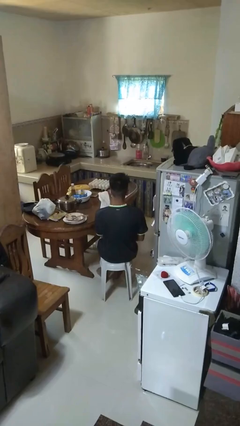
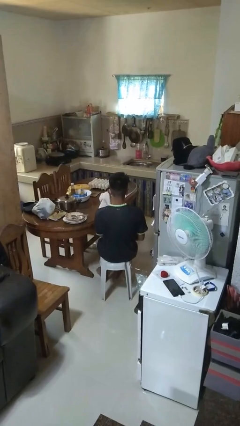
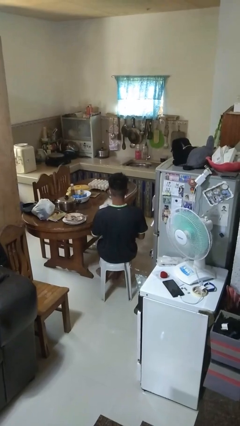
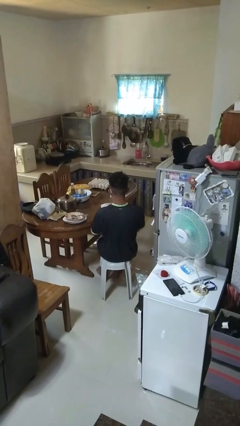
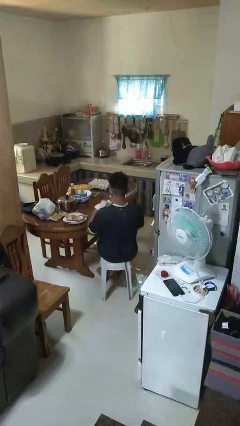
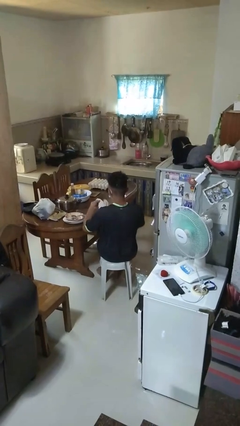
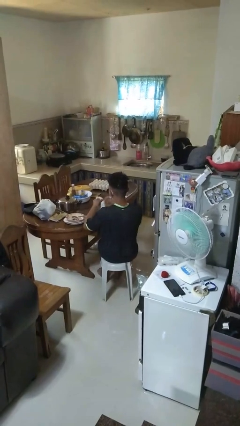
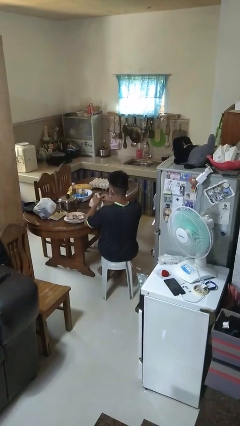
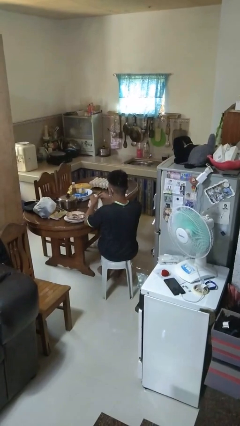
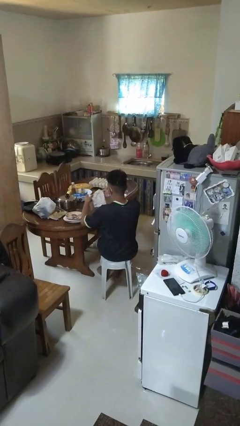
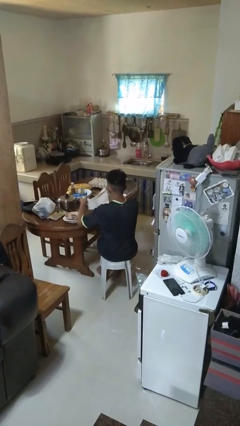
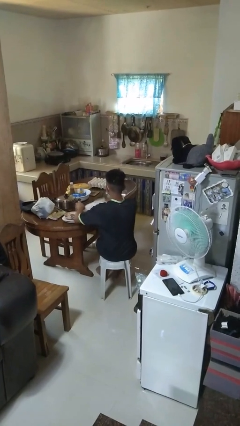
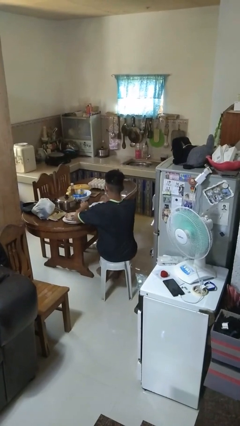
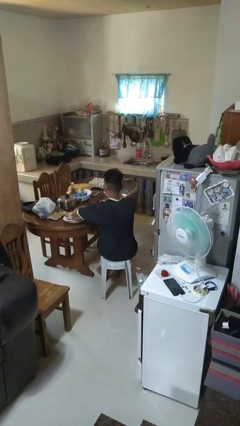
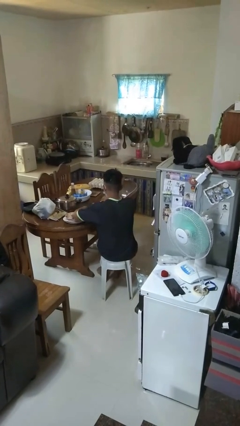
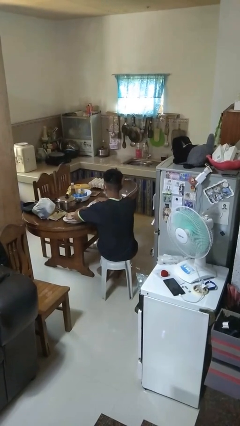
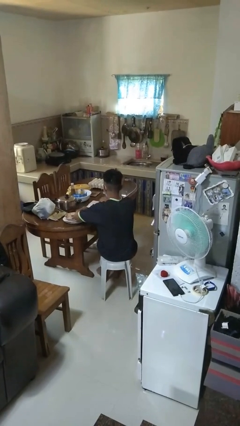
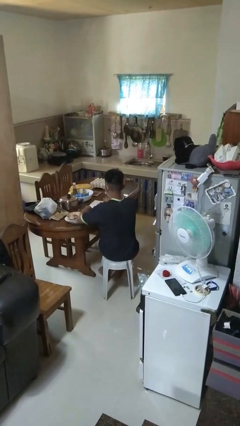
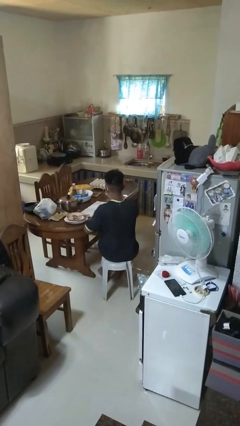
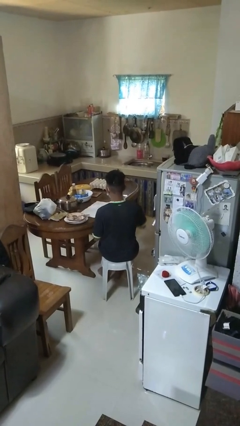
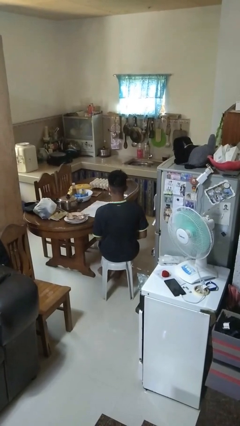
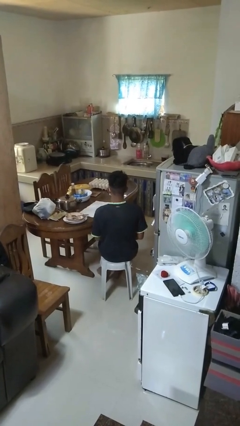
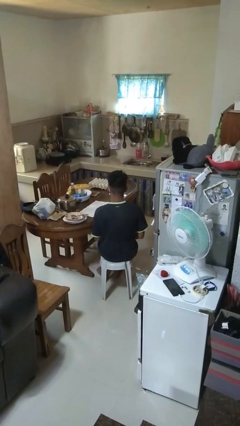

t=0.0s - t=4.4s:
person spreads tablecloth

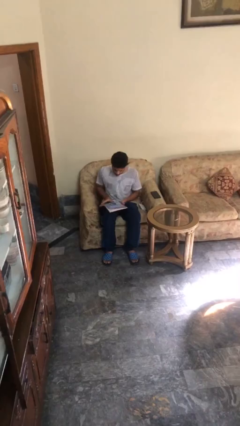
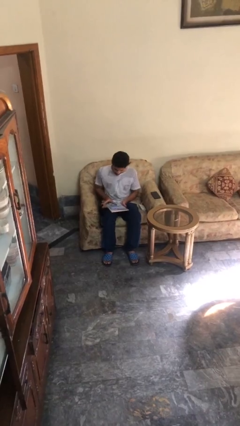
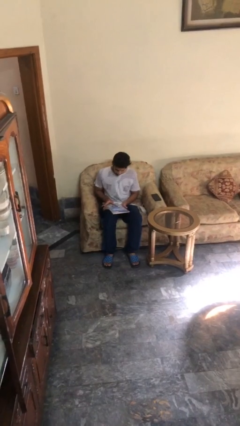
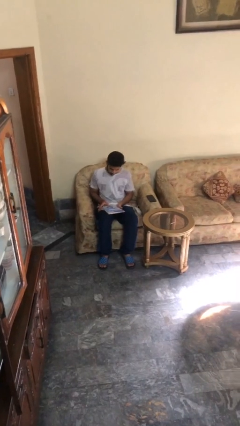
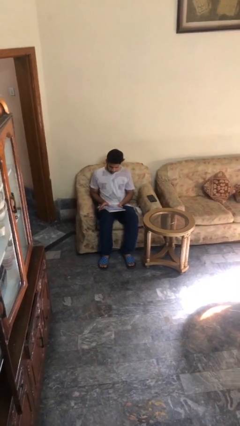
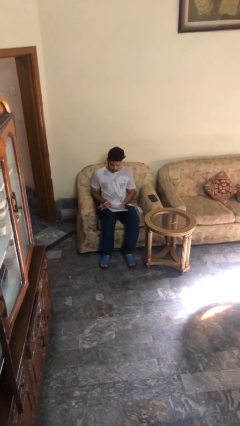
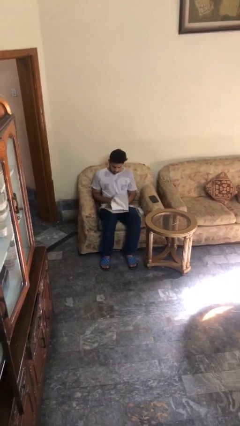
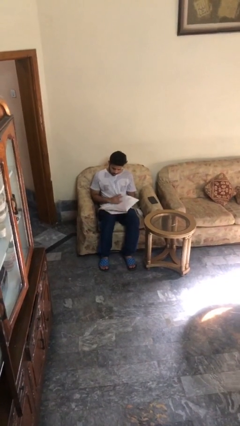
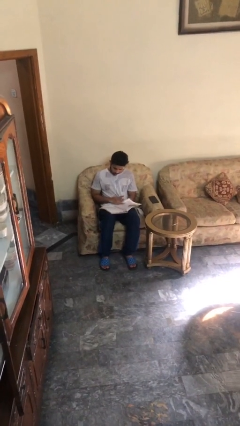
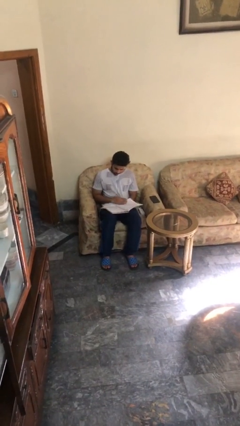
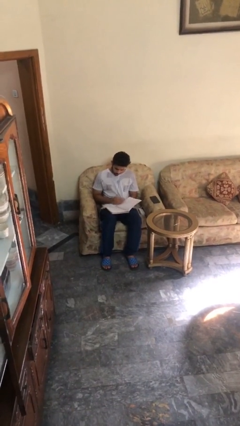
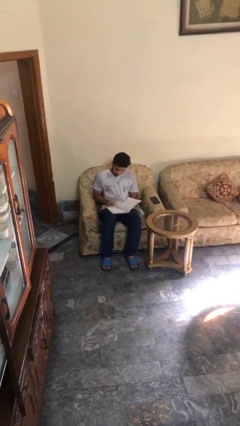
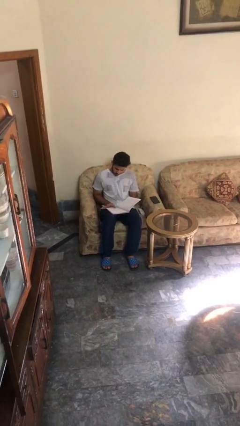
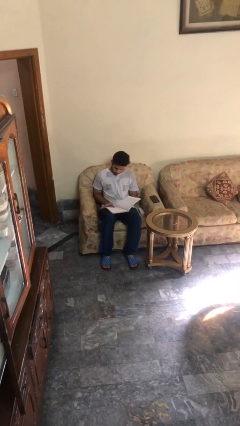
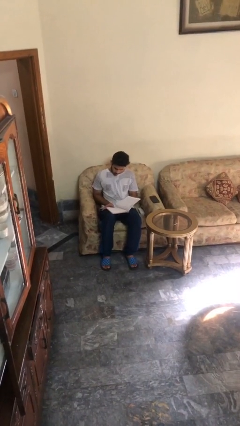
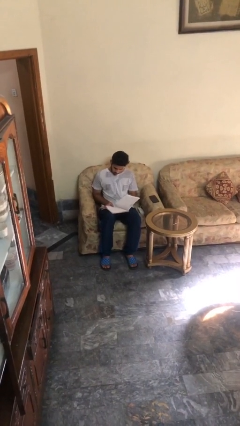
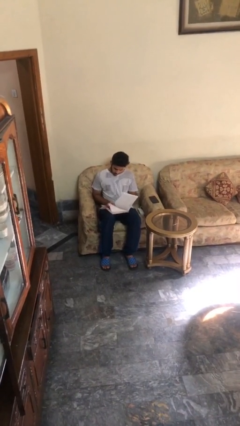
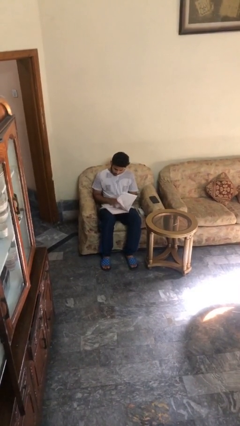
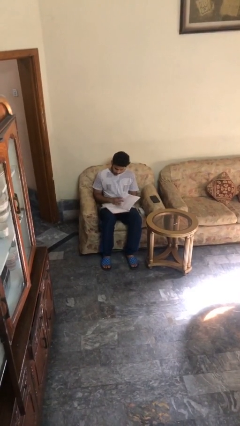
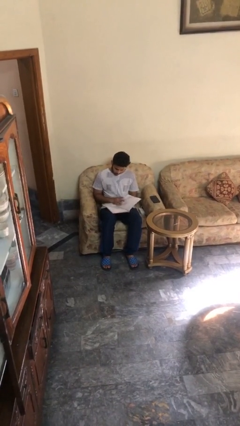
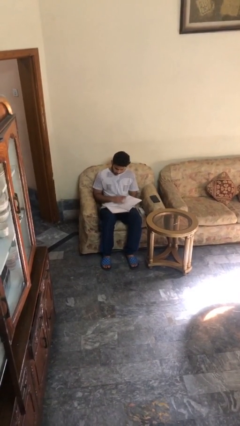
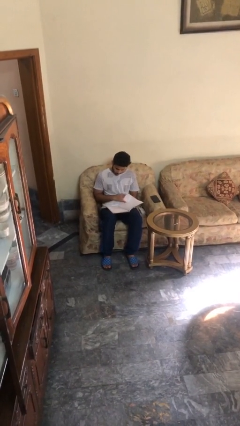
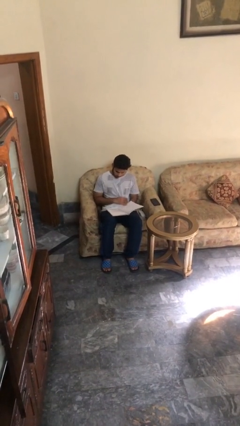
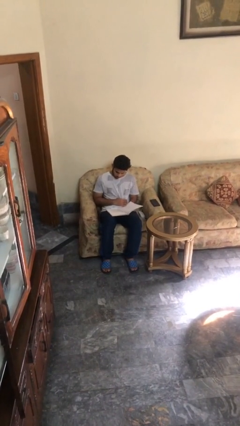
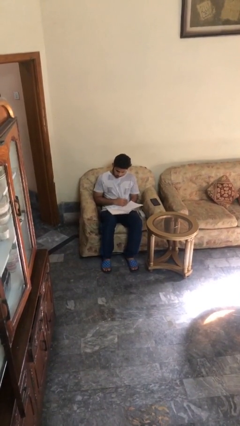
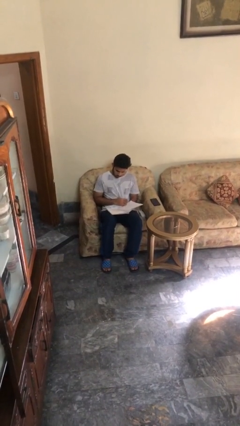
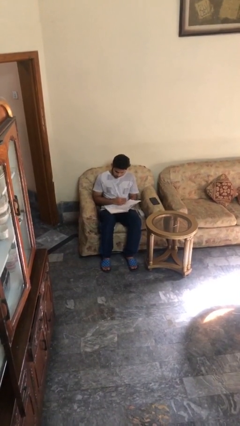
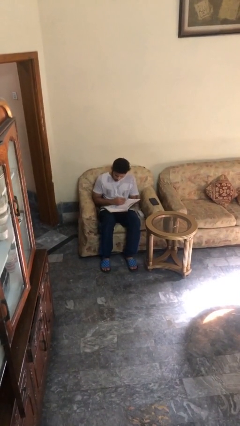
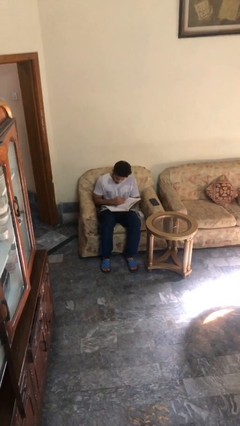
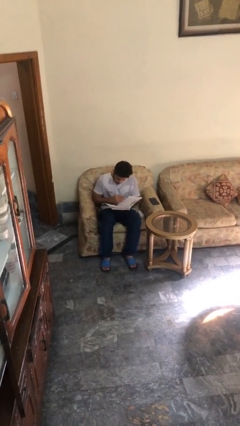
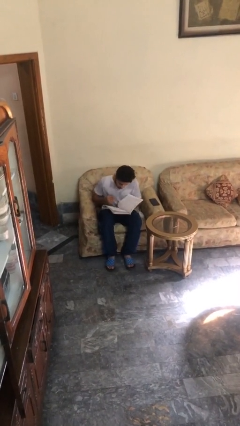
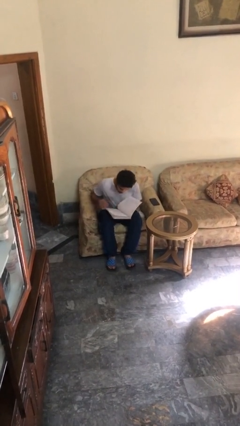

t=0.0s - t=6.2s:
person reads document

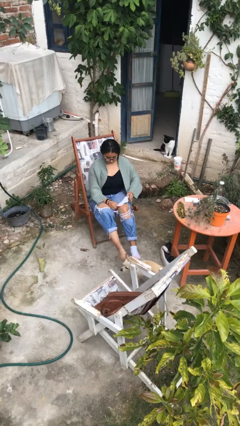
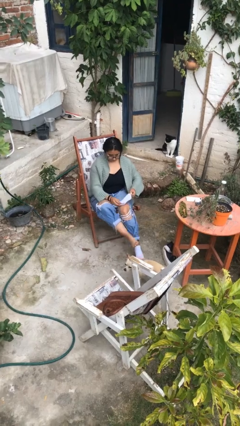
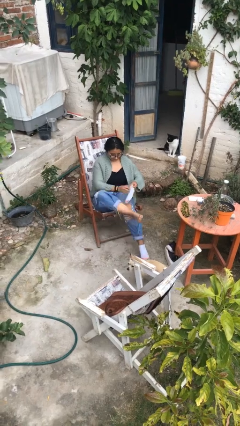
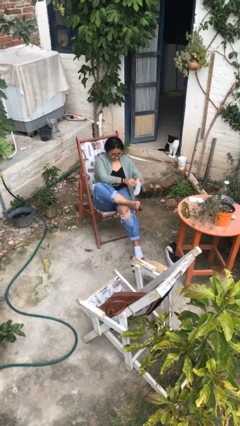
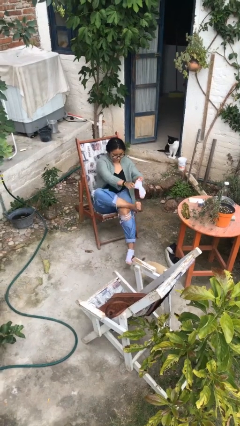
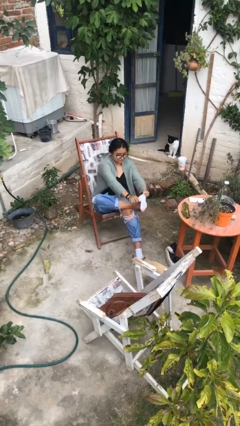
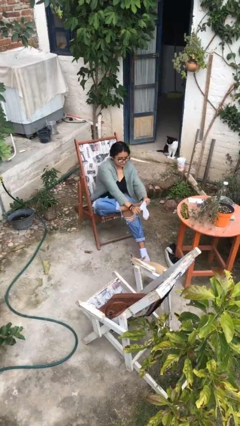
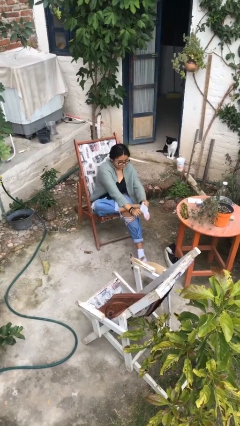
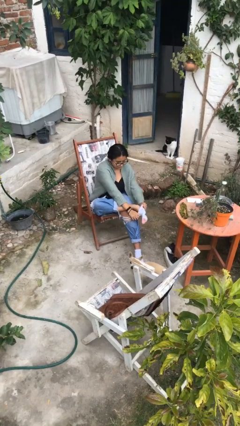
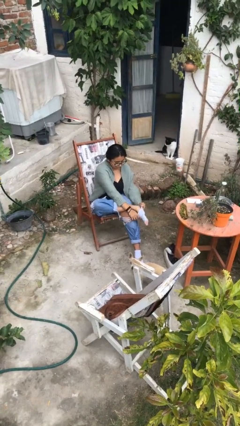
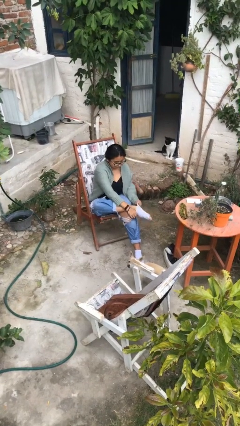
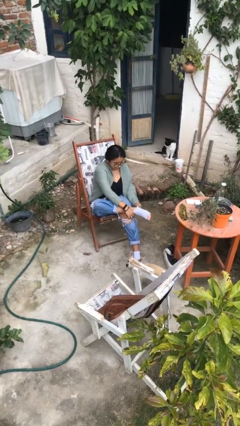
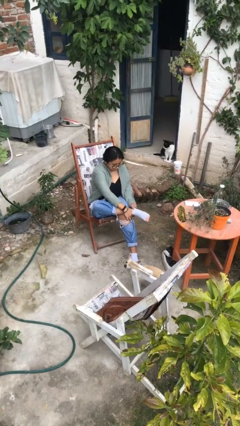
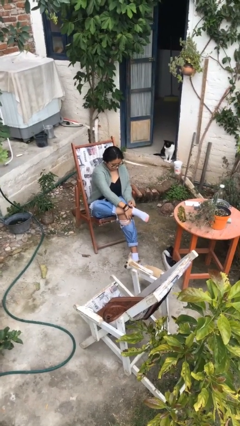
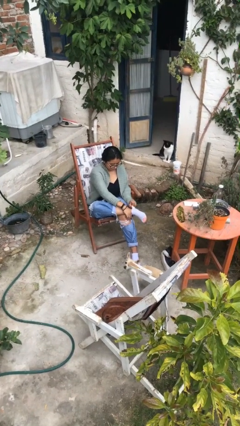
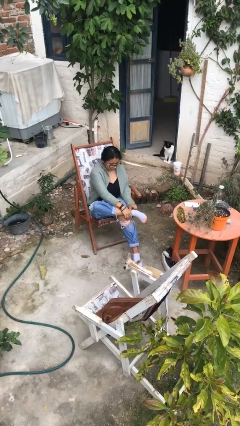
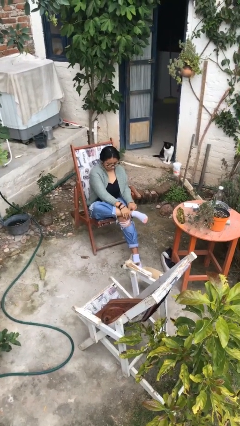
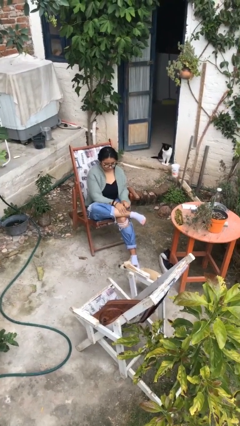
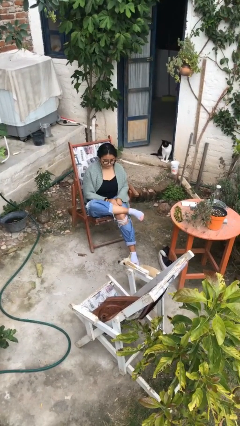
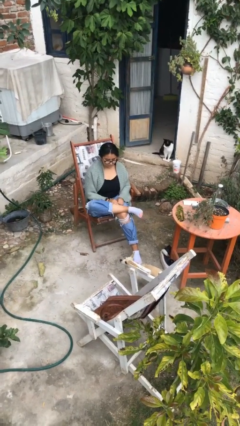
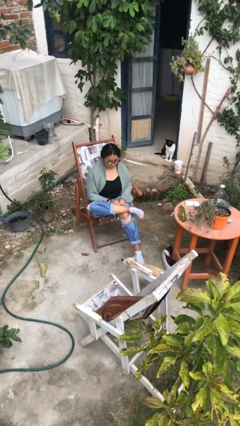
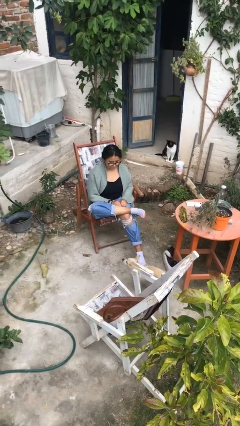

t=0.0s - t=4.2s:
person puts on socks

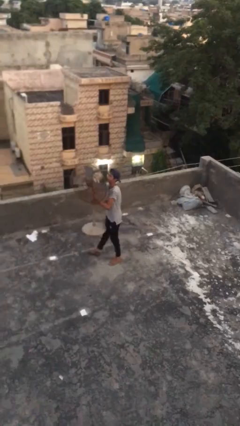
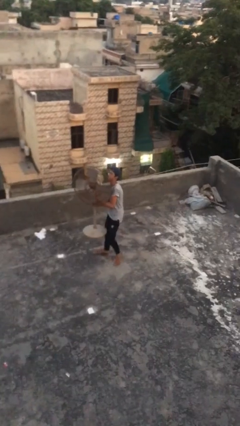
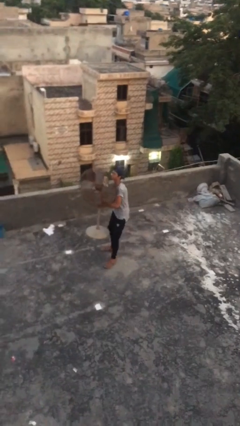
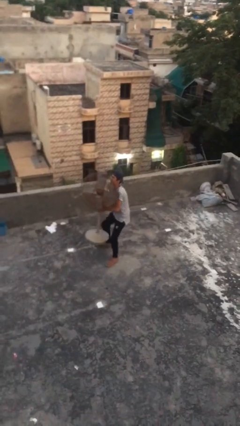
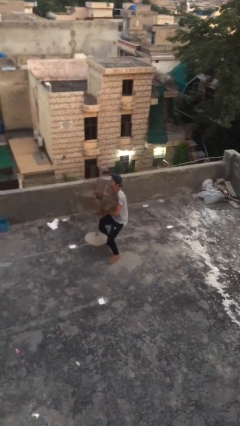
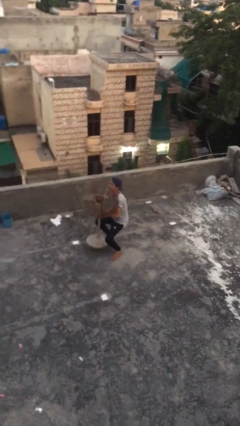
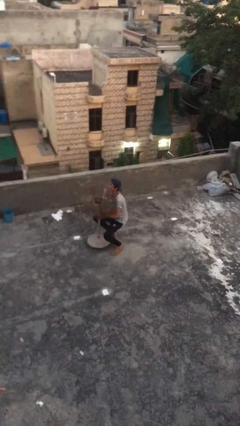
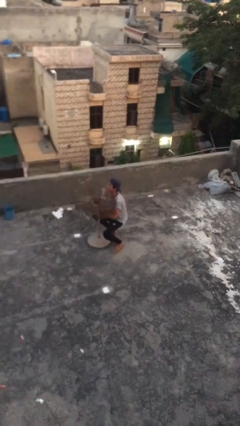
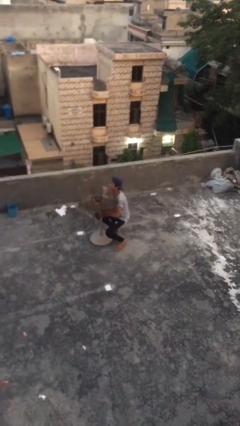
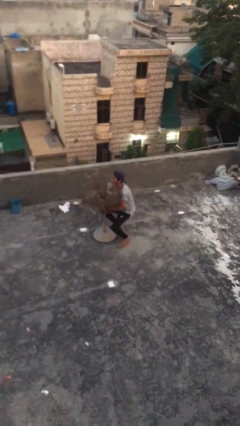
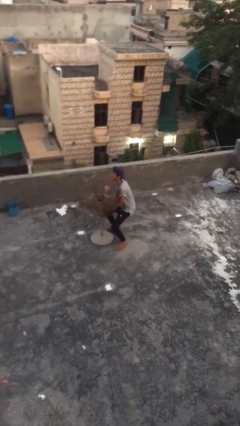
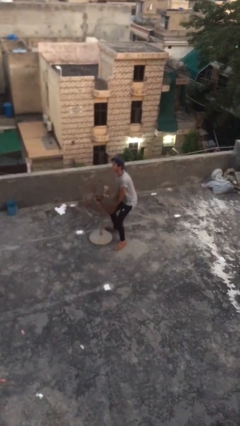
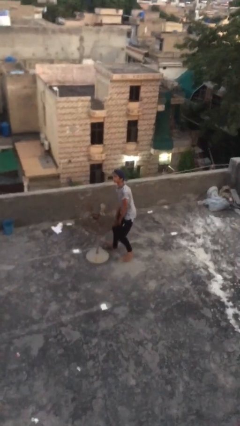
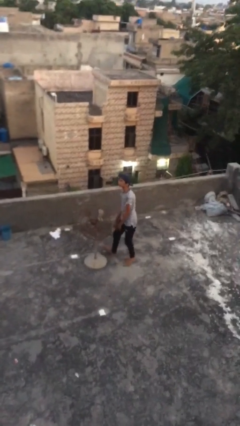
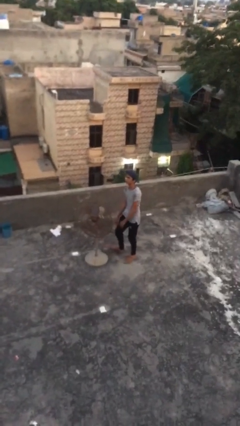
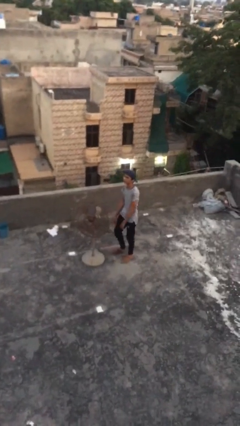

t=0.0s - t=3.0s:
person puts down object on floor
